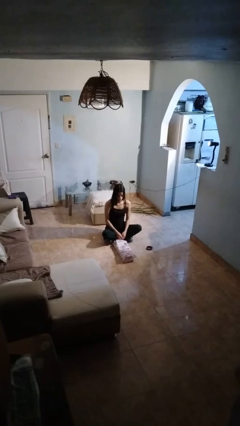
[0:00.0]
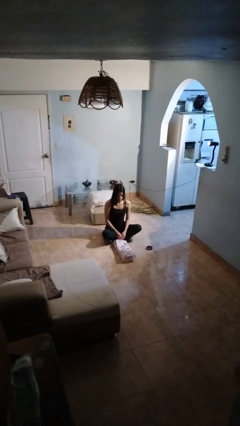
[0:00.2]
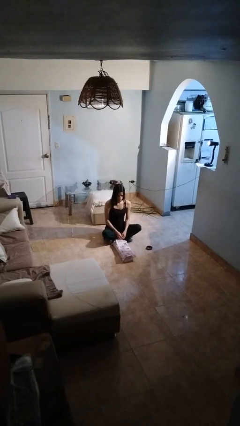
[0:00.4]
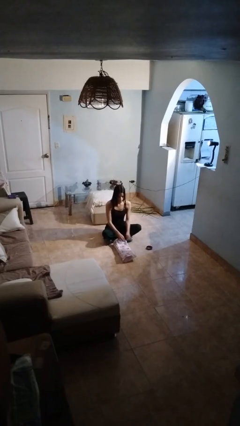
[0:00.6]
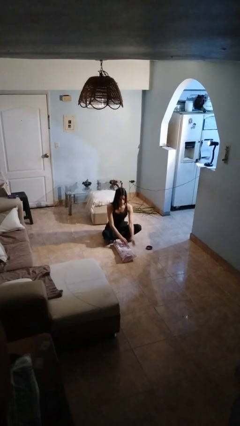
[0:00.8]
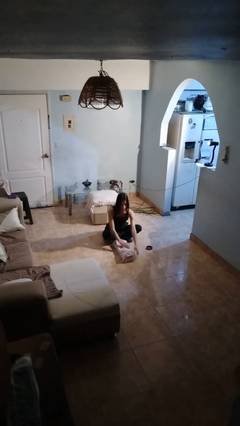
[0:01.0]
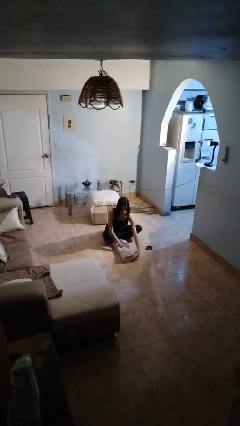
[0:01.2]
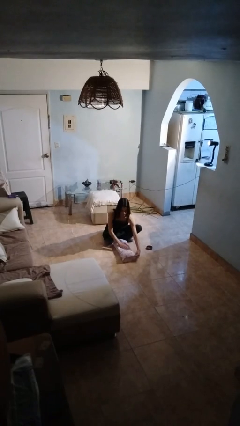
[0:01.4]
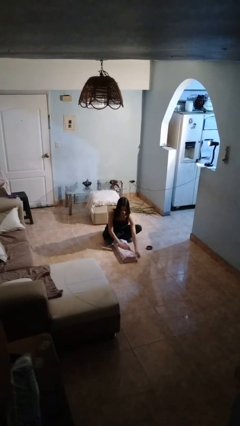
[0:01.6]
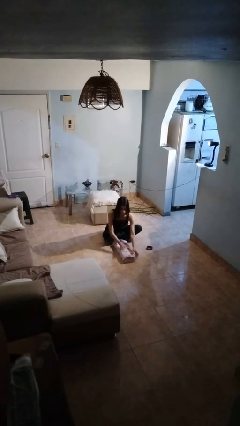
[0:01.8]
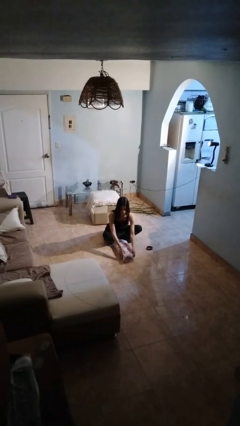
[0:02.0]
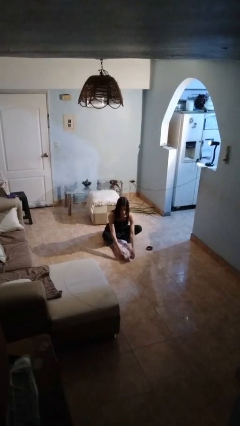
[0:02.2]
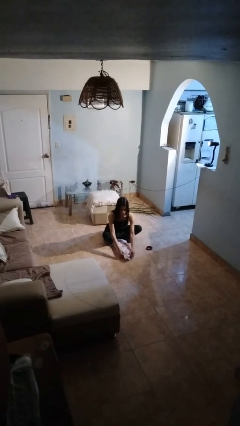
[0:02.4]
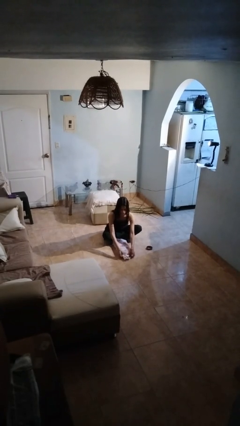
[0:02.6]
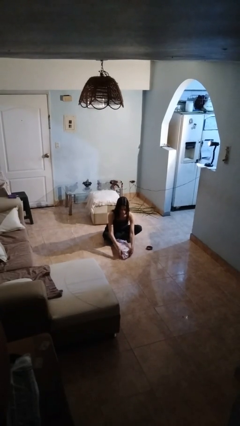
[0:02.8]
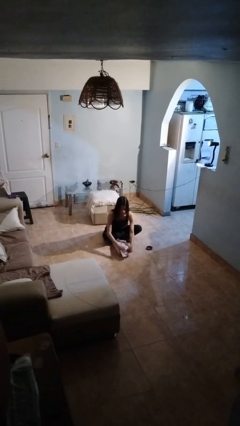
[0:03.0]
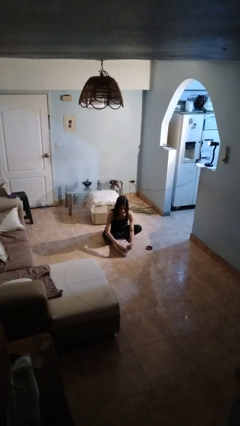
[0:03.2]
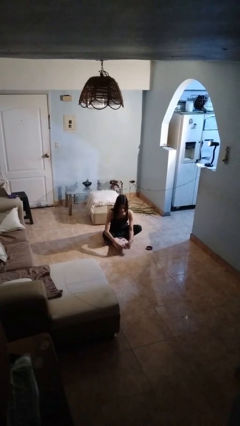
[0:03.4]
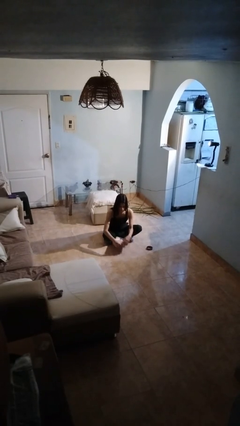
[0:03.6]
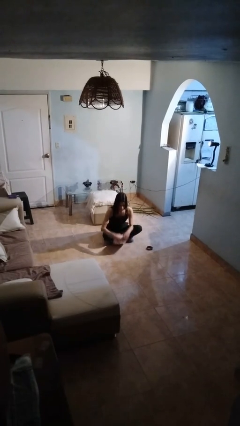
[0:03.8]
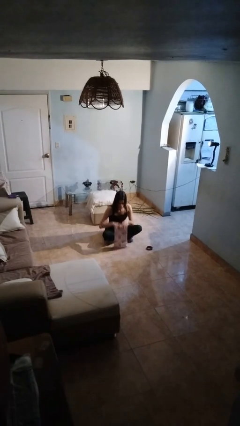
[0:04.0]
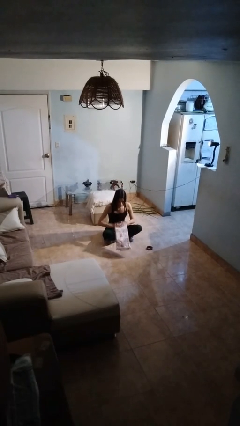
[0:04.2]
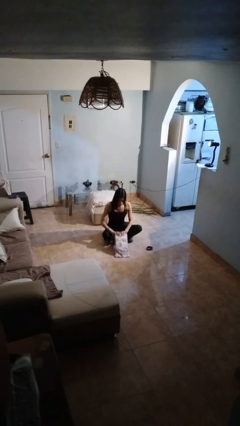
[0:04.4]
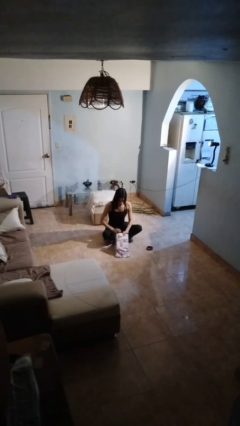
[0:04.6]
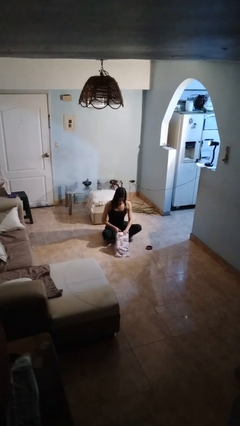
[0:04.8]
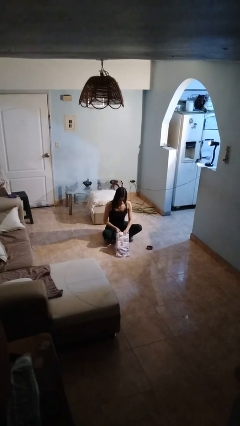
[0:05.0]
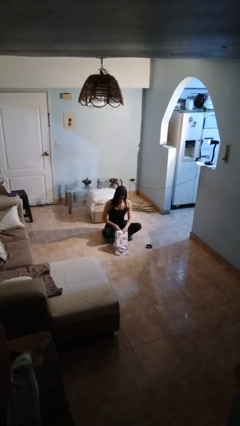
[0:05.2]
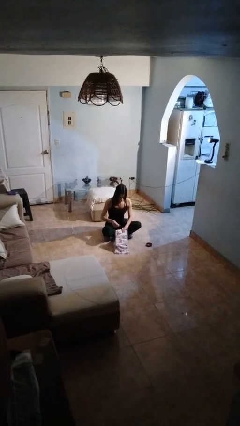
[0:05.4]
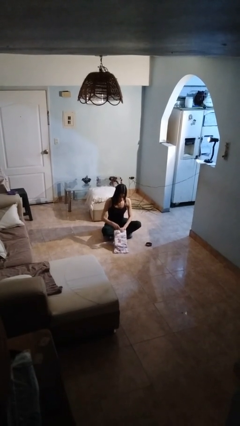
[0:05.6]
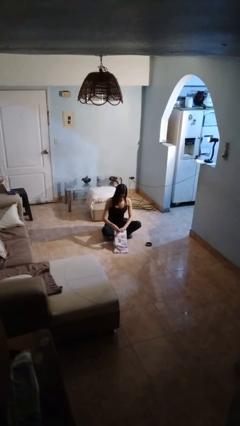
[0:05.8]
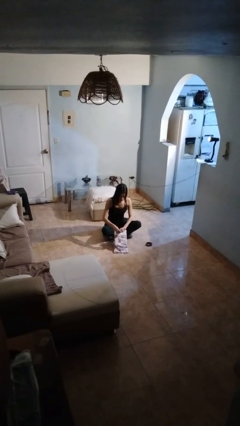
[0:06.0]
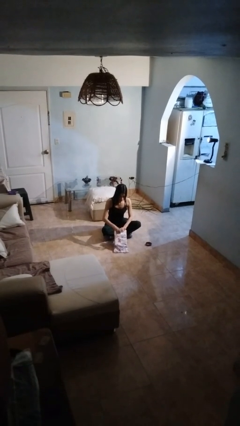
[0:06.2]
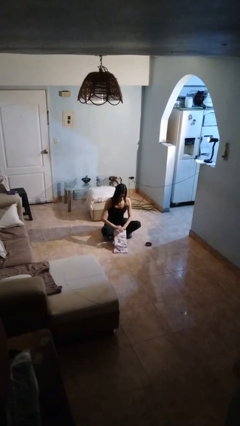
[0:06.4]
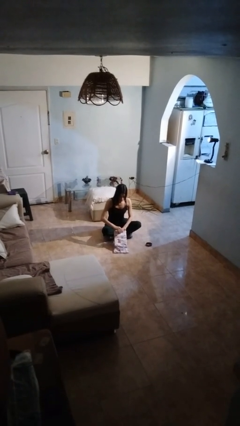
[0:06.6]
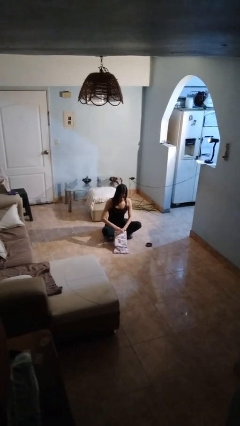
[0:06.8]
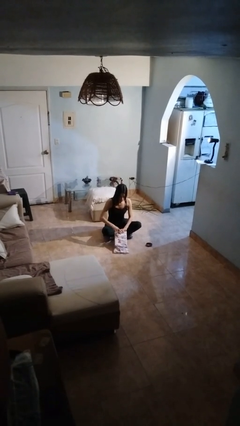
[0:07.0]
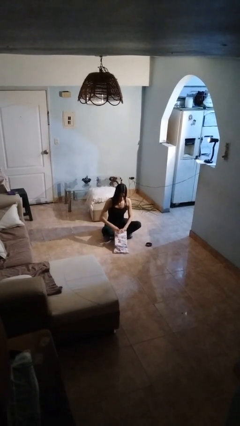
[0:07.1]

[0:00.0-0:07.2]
person wraps box

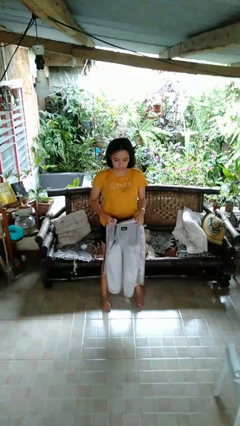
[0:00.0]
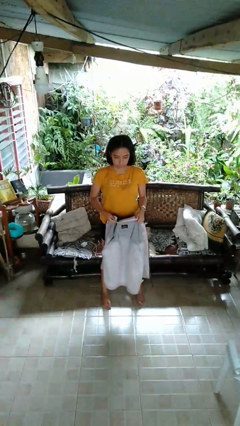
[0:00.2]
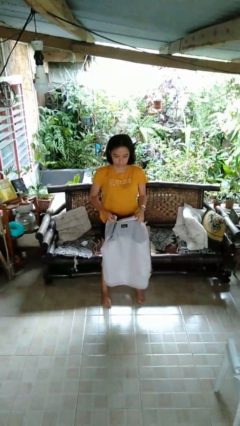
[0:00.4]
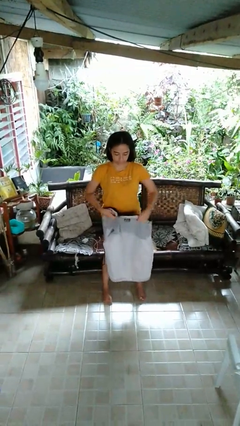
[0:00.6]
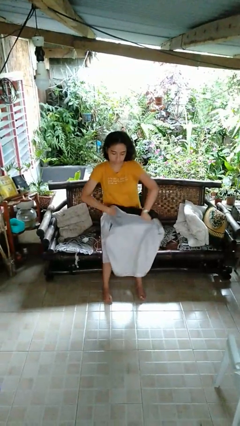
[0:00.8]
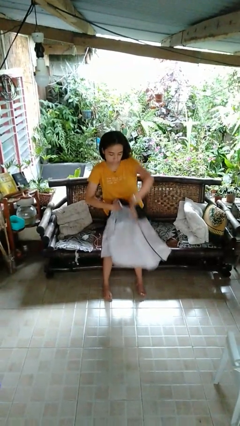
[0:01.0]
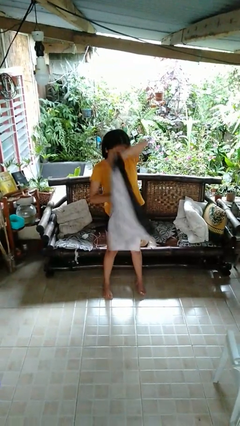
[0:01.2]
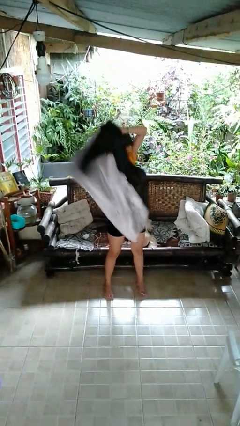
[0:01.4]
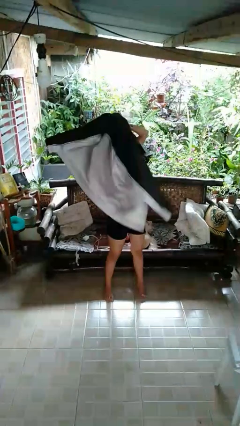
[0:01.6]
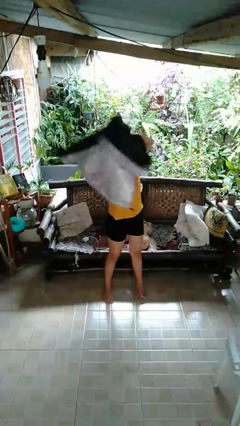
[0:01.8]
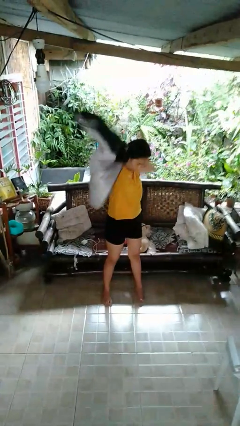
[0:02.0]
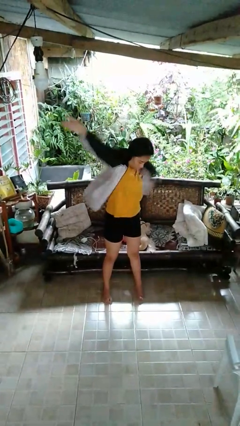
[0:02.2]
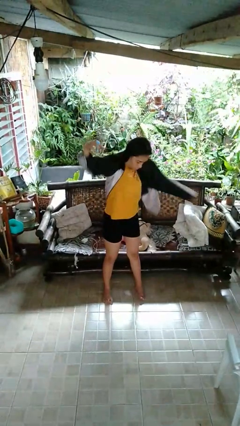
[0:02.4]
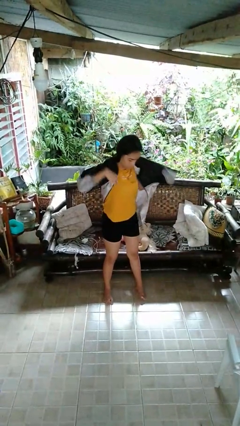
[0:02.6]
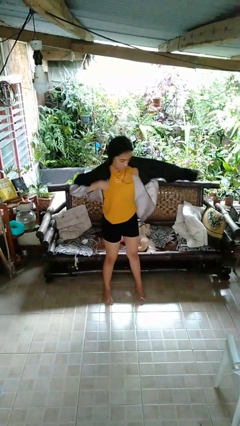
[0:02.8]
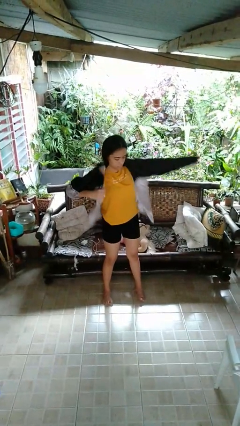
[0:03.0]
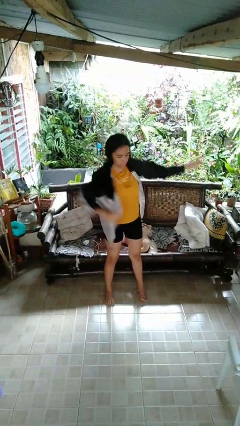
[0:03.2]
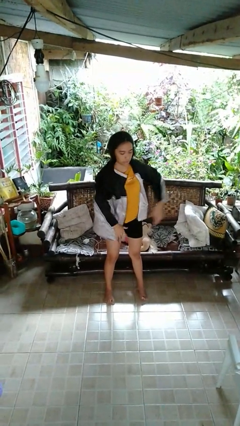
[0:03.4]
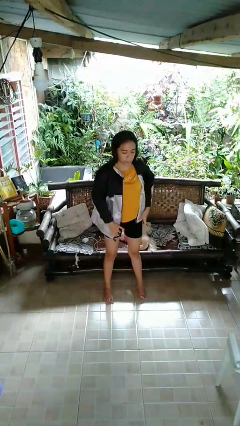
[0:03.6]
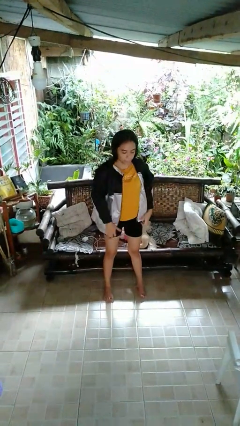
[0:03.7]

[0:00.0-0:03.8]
person puts on jacket

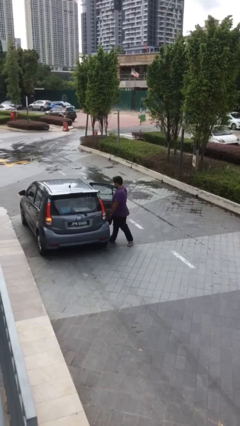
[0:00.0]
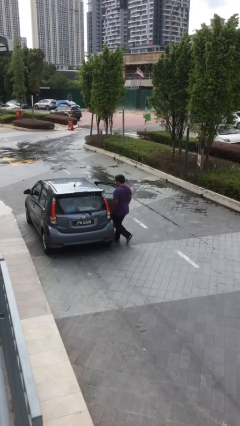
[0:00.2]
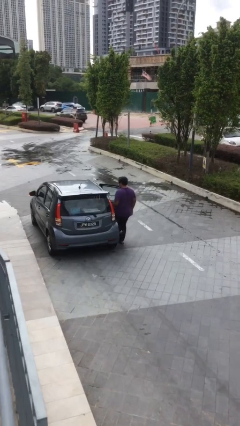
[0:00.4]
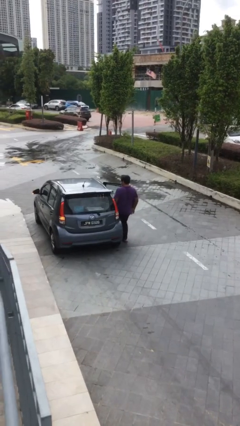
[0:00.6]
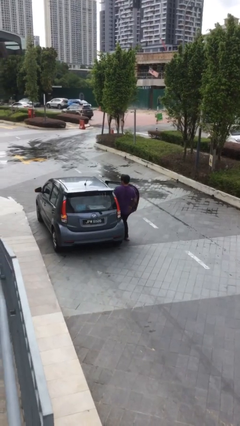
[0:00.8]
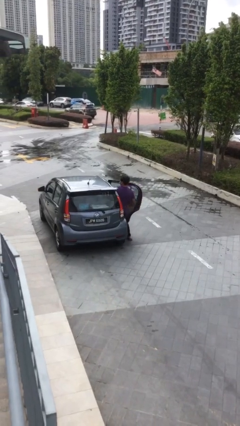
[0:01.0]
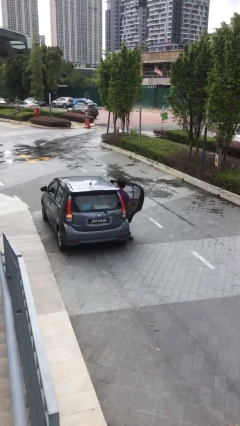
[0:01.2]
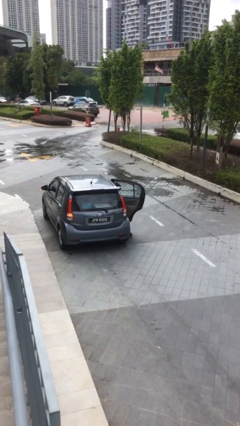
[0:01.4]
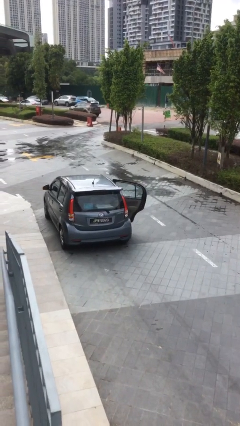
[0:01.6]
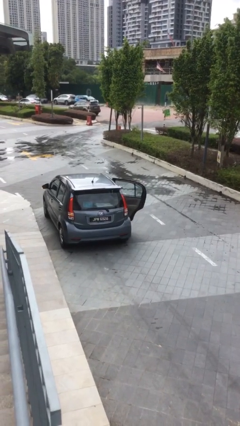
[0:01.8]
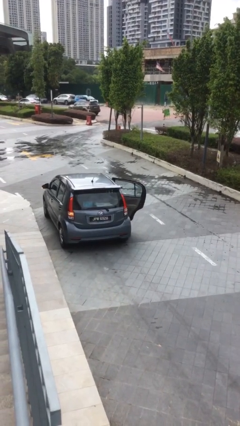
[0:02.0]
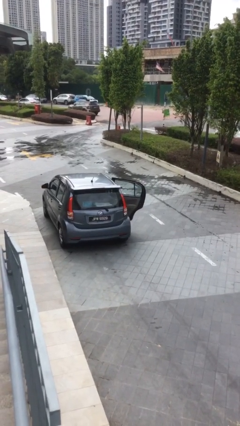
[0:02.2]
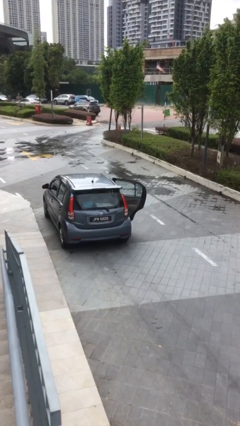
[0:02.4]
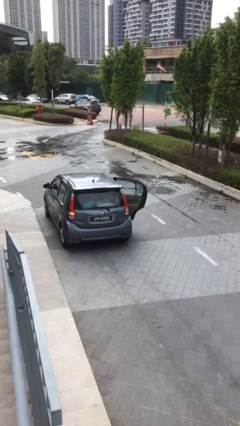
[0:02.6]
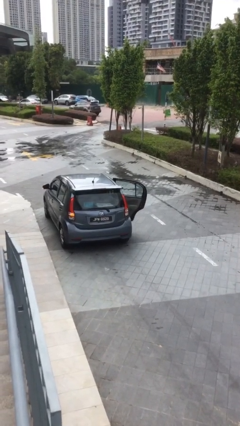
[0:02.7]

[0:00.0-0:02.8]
person enters car

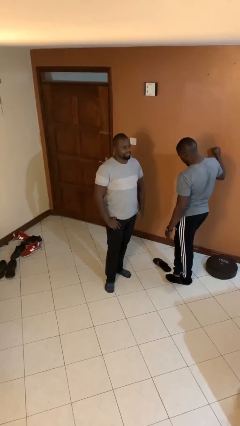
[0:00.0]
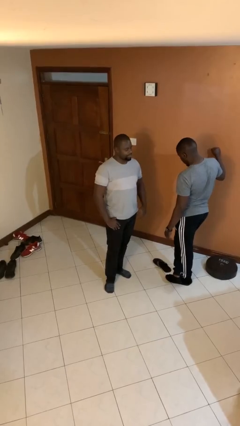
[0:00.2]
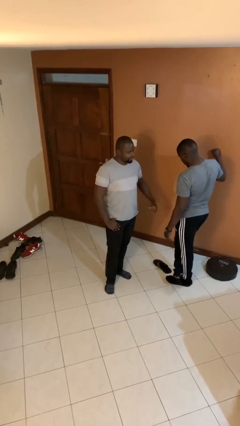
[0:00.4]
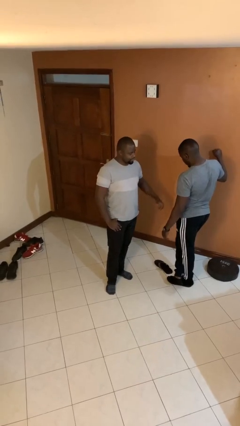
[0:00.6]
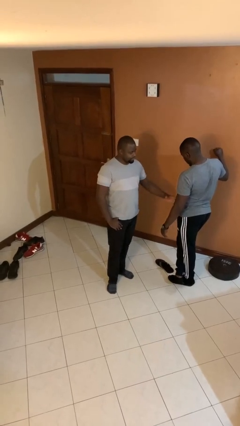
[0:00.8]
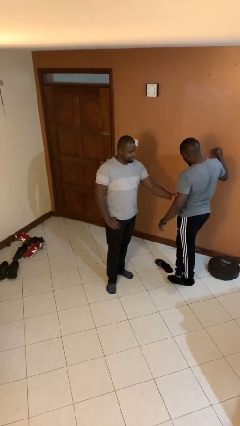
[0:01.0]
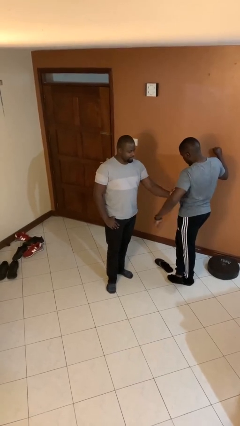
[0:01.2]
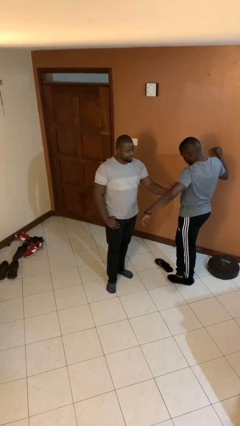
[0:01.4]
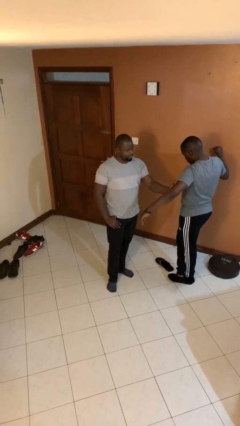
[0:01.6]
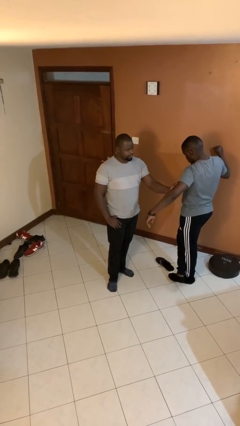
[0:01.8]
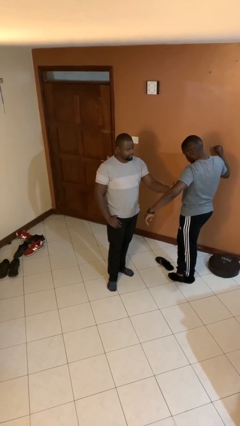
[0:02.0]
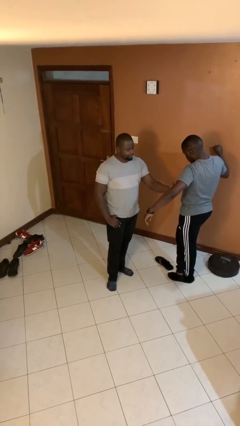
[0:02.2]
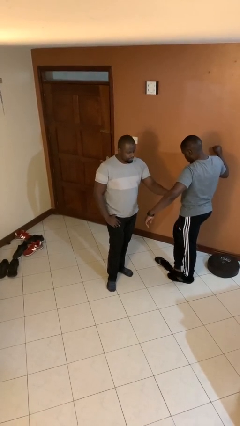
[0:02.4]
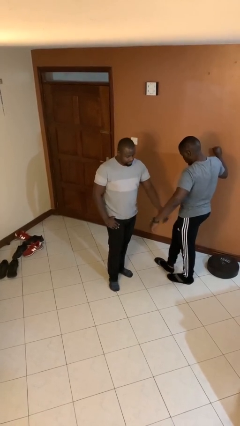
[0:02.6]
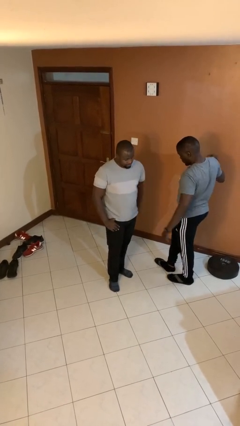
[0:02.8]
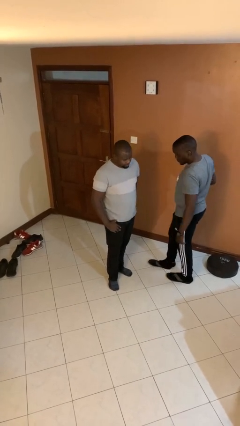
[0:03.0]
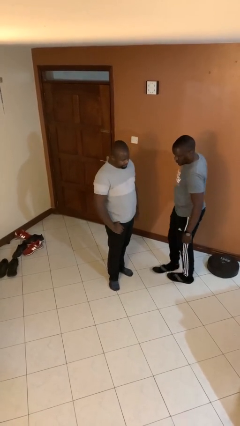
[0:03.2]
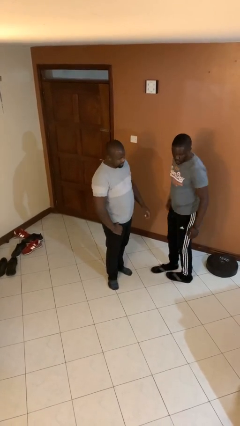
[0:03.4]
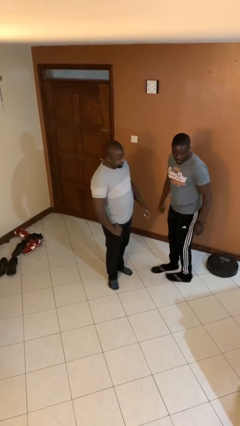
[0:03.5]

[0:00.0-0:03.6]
person grabs person by bicep

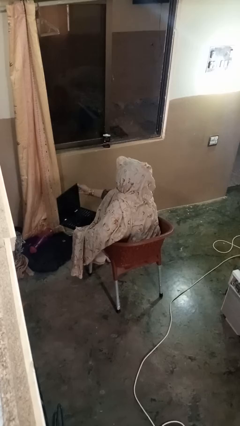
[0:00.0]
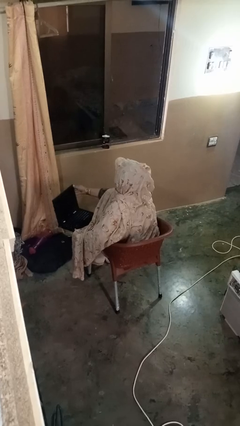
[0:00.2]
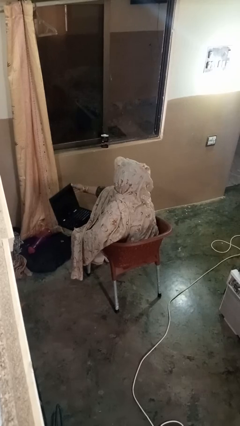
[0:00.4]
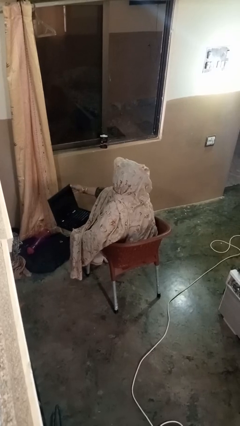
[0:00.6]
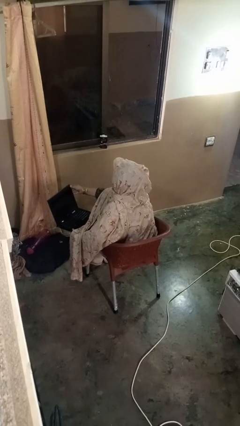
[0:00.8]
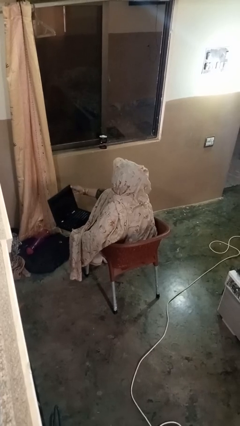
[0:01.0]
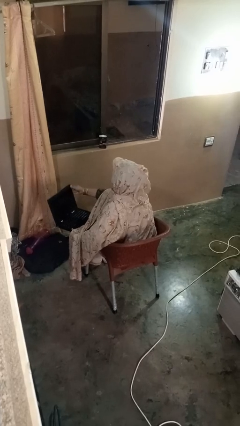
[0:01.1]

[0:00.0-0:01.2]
person closes laptop
